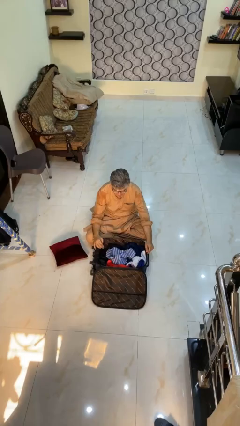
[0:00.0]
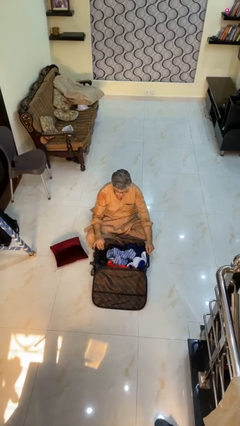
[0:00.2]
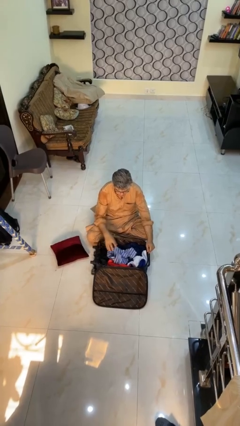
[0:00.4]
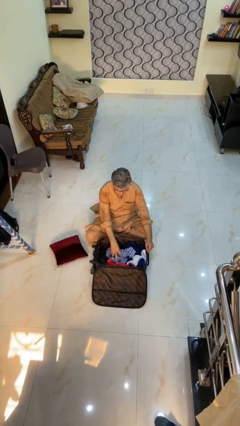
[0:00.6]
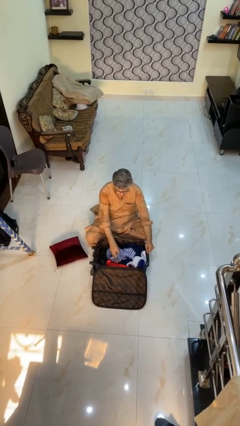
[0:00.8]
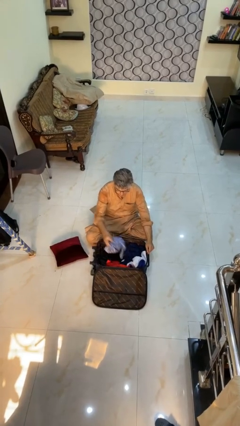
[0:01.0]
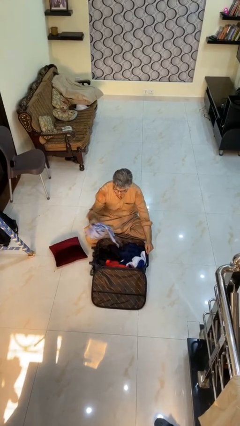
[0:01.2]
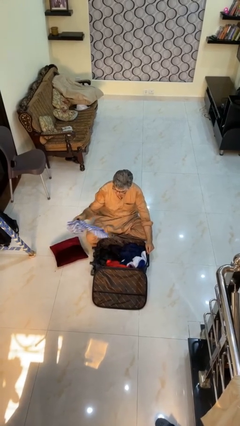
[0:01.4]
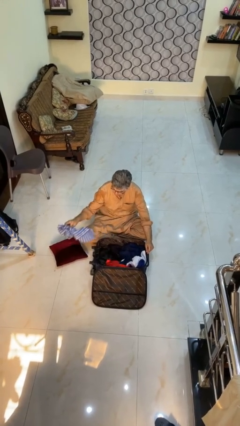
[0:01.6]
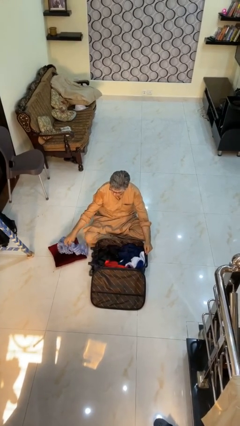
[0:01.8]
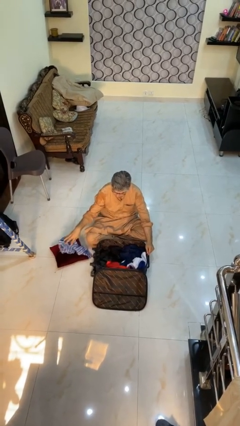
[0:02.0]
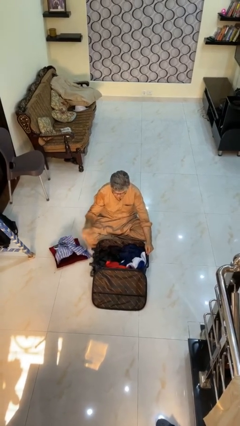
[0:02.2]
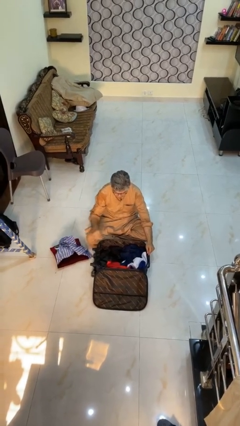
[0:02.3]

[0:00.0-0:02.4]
person unloads clothes from suitcase

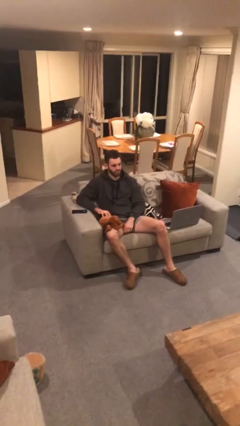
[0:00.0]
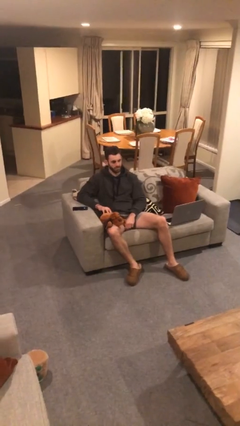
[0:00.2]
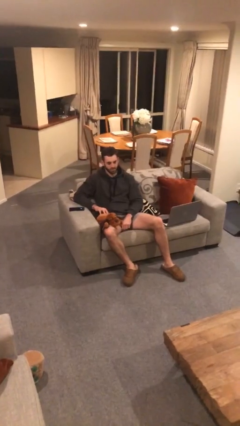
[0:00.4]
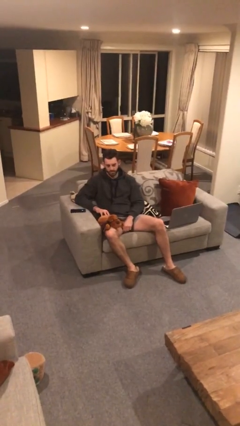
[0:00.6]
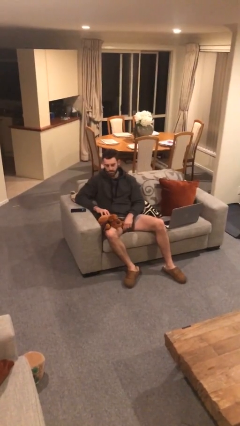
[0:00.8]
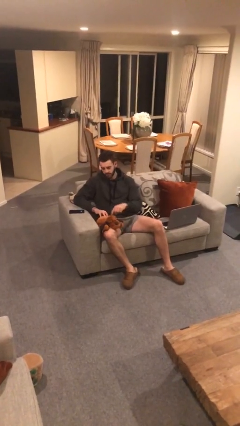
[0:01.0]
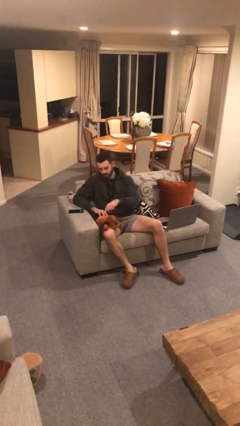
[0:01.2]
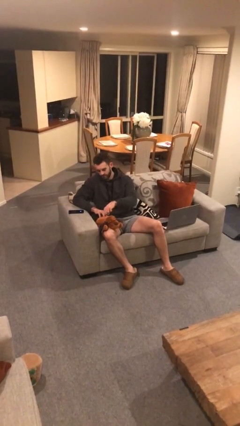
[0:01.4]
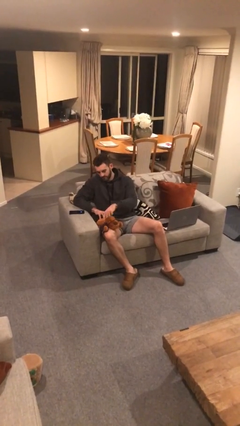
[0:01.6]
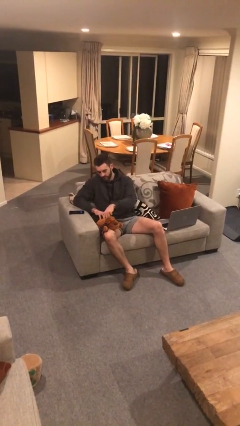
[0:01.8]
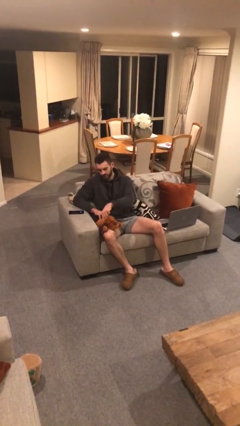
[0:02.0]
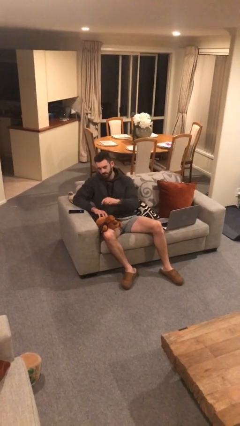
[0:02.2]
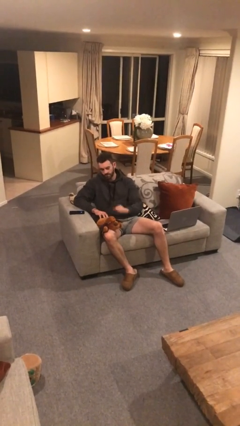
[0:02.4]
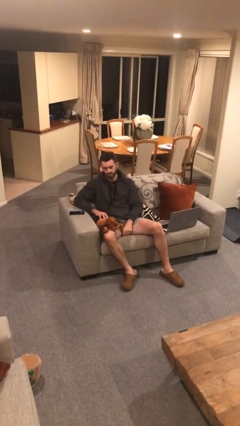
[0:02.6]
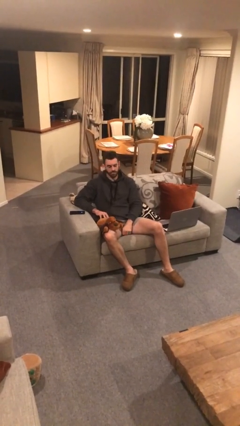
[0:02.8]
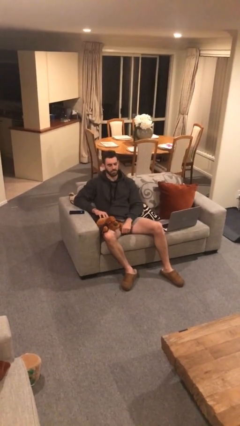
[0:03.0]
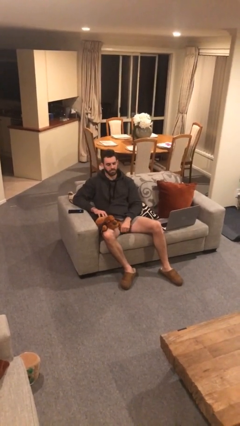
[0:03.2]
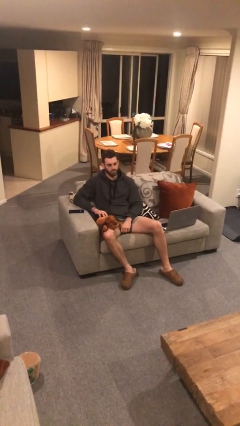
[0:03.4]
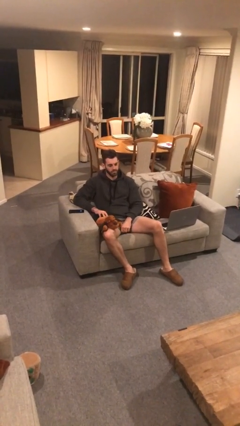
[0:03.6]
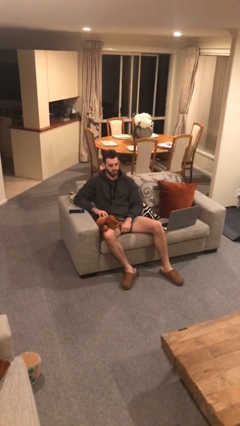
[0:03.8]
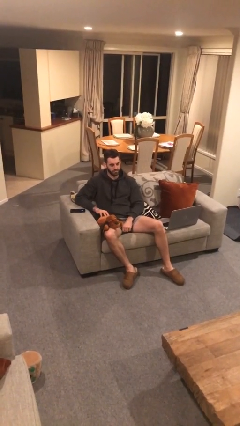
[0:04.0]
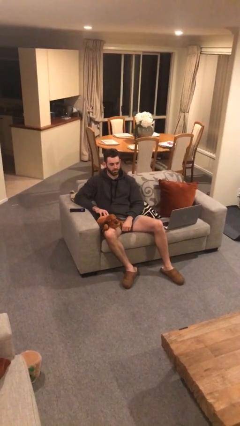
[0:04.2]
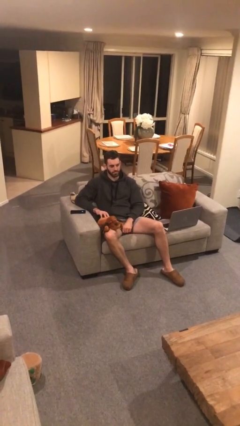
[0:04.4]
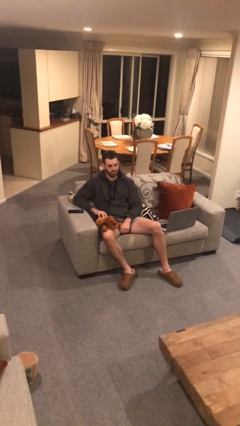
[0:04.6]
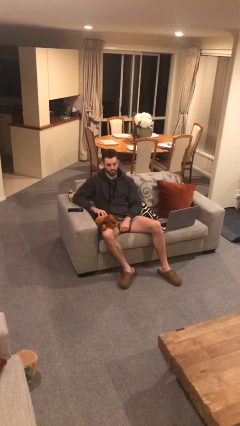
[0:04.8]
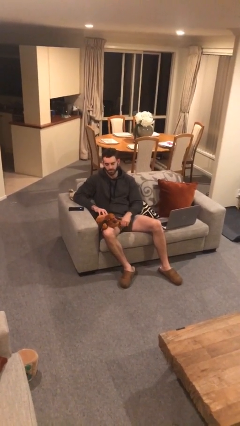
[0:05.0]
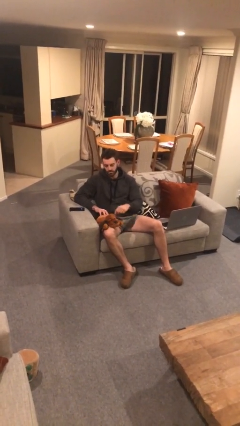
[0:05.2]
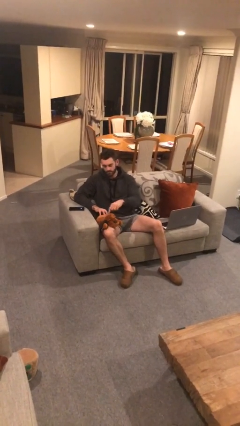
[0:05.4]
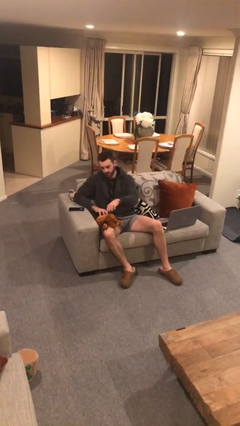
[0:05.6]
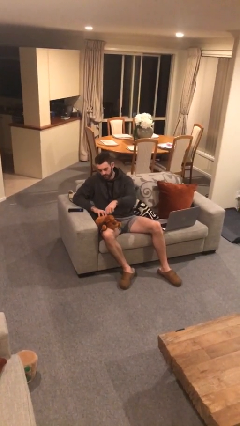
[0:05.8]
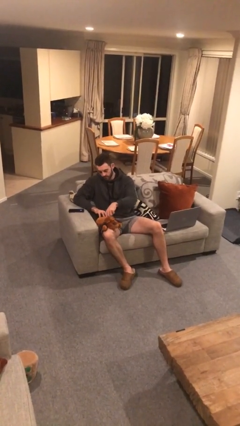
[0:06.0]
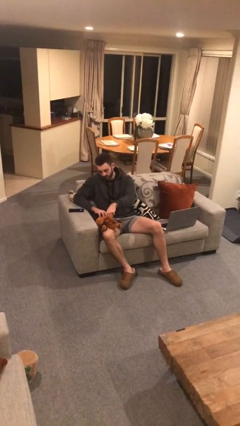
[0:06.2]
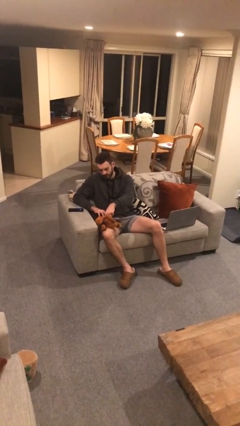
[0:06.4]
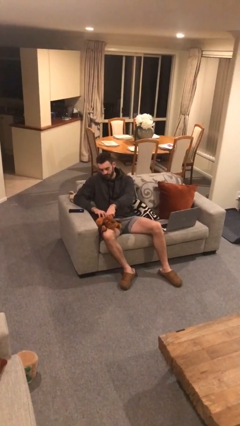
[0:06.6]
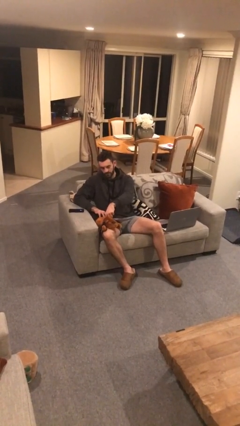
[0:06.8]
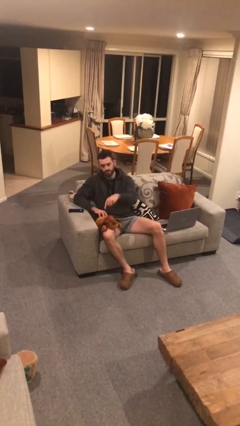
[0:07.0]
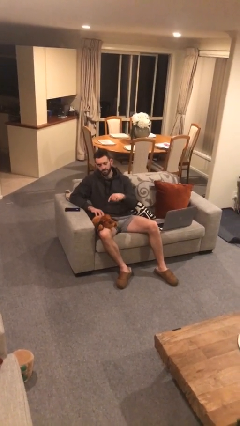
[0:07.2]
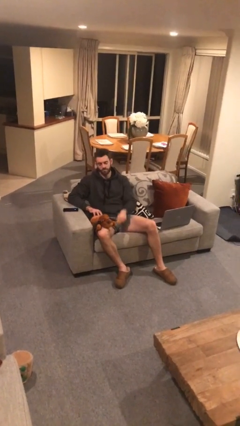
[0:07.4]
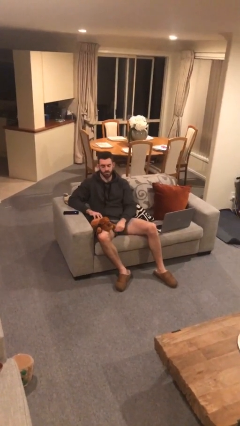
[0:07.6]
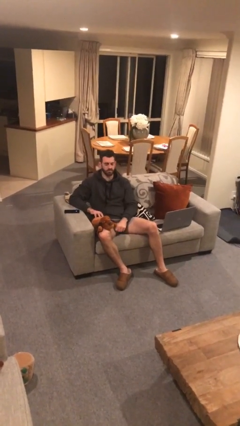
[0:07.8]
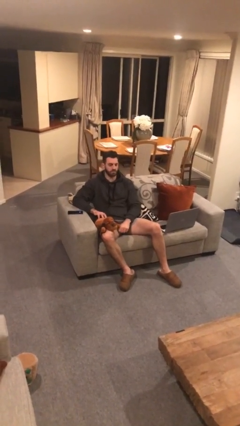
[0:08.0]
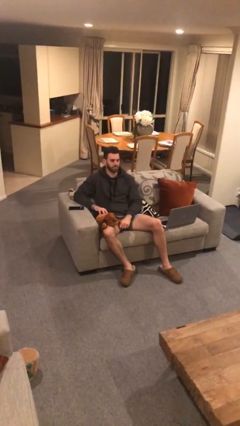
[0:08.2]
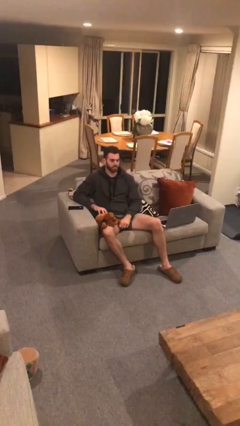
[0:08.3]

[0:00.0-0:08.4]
person taps object with finger

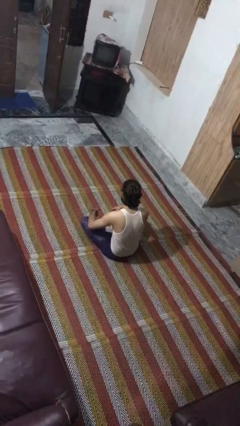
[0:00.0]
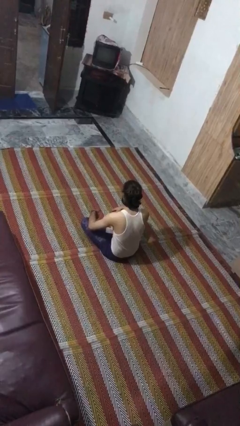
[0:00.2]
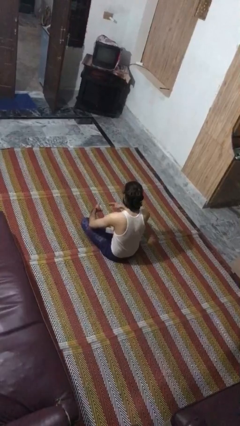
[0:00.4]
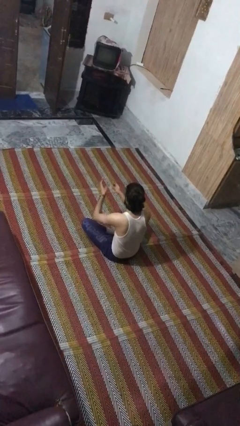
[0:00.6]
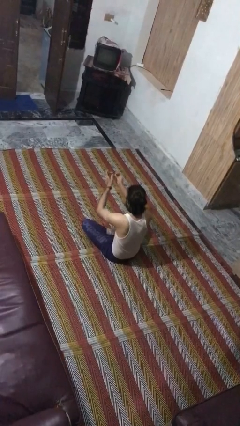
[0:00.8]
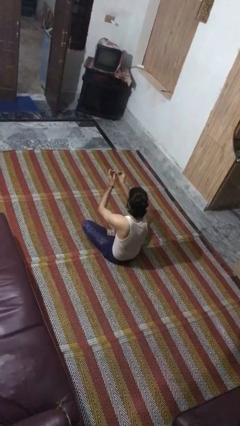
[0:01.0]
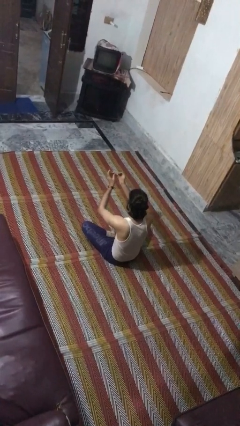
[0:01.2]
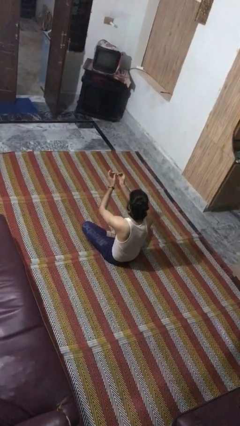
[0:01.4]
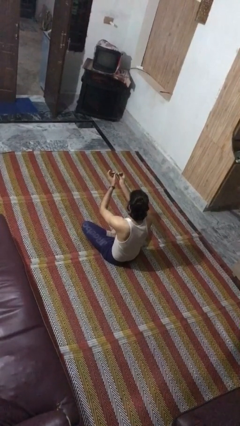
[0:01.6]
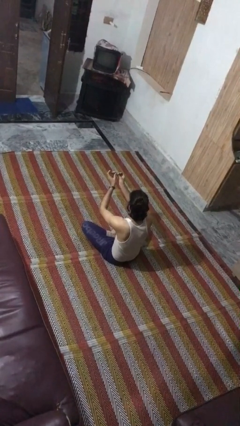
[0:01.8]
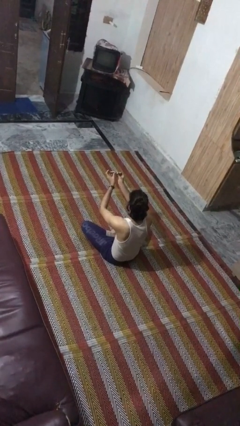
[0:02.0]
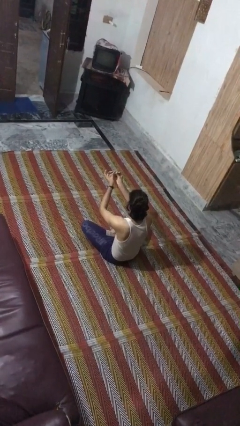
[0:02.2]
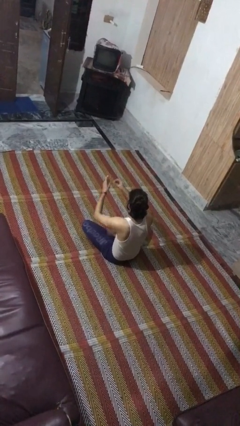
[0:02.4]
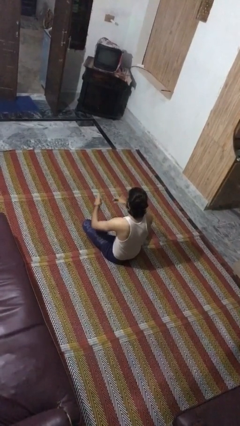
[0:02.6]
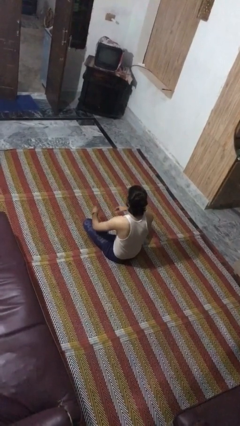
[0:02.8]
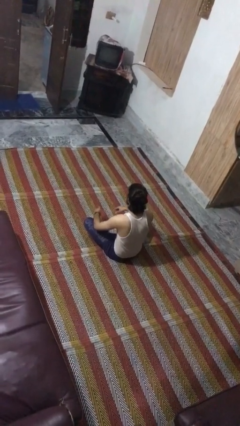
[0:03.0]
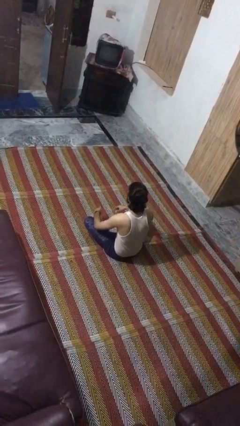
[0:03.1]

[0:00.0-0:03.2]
person clips fingernails

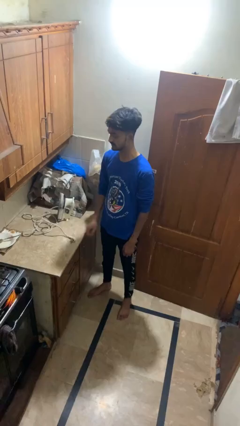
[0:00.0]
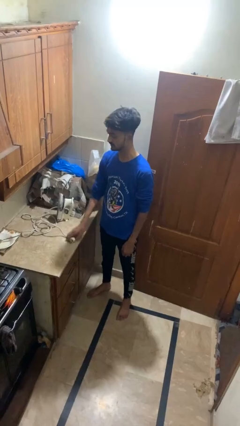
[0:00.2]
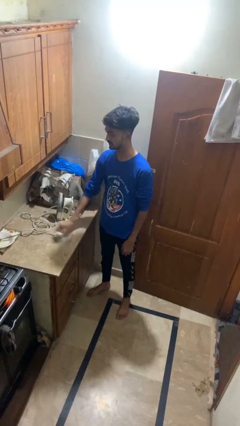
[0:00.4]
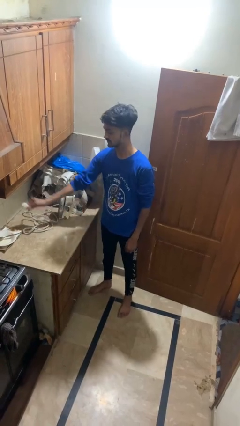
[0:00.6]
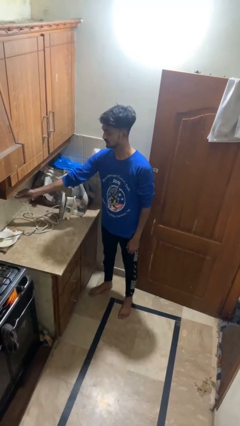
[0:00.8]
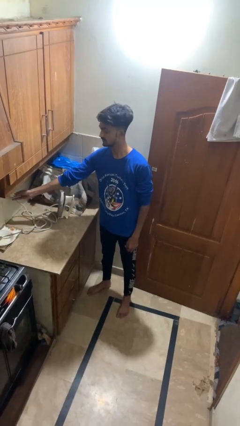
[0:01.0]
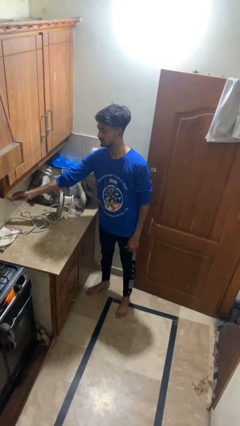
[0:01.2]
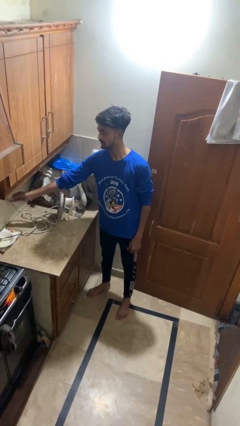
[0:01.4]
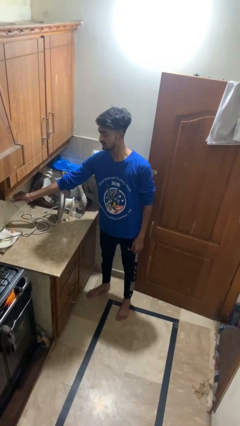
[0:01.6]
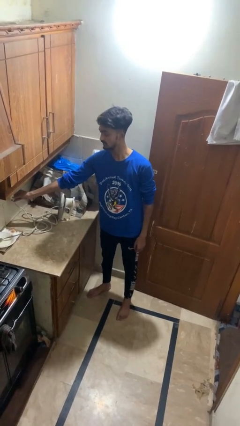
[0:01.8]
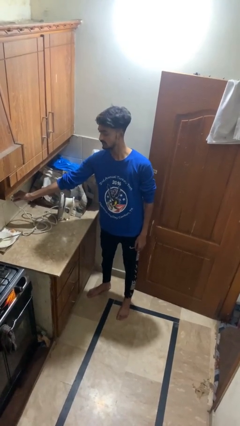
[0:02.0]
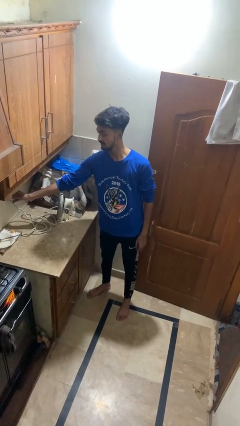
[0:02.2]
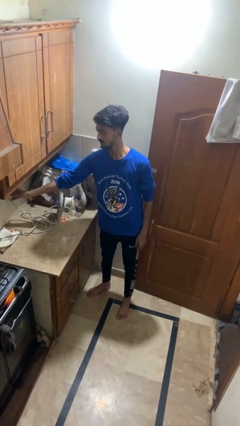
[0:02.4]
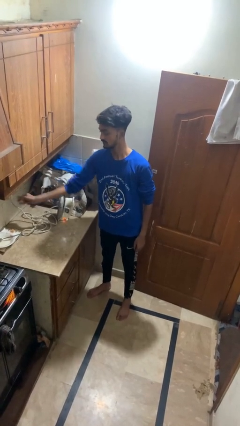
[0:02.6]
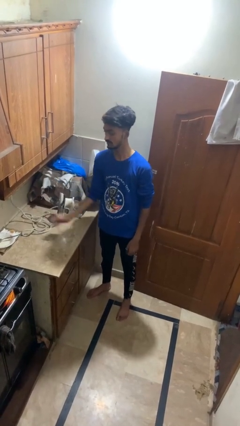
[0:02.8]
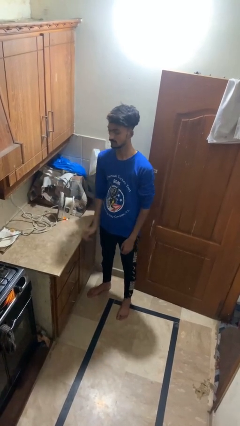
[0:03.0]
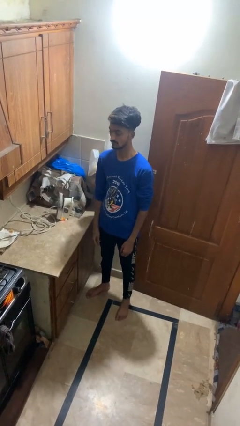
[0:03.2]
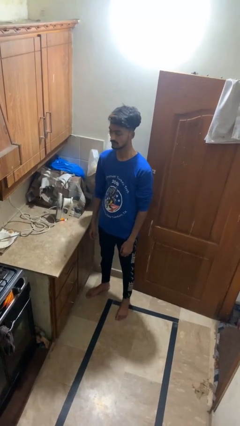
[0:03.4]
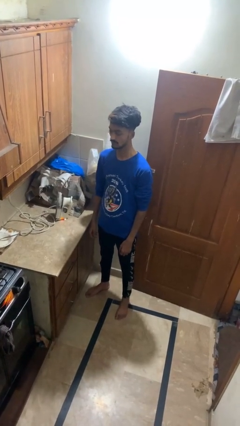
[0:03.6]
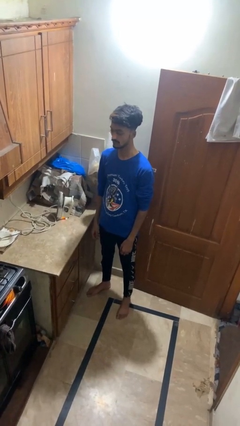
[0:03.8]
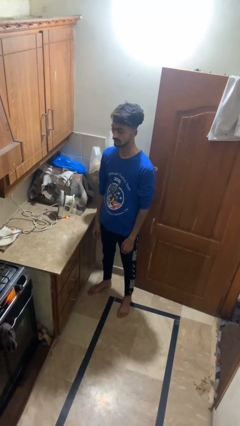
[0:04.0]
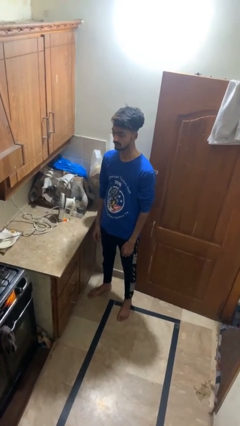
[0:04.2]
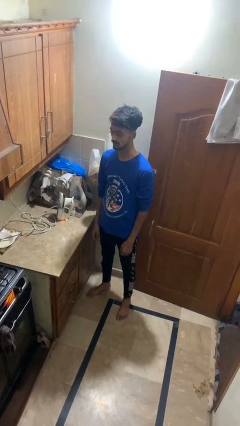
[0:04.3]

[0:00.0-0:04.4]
person plugs into electrical socket
